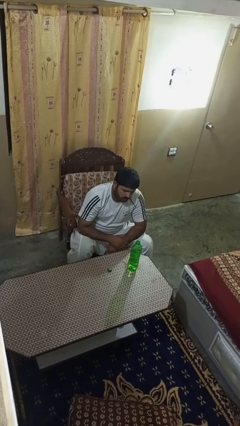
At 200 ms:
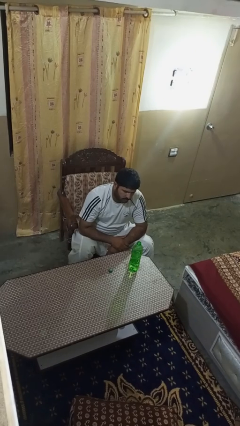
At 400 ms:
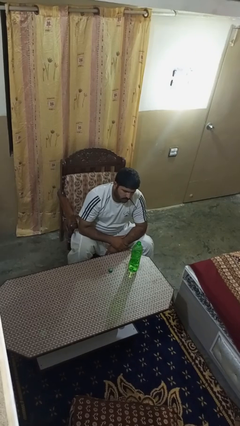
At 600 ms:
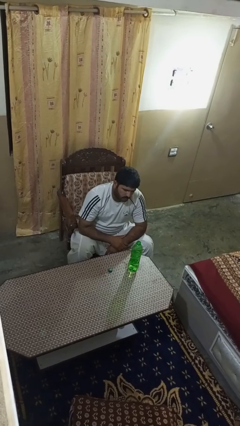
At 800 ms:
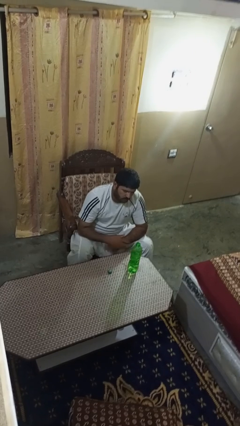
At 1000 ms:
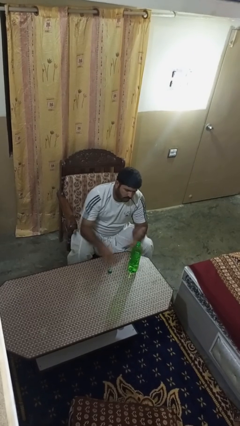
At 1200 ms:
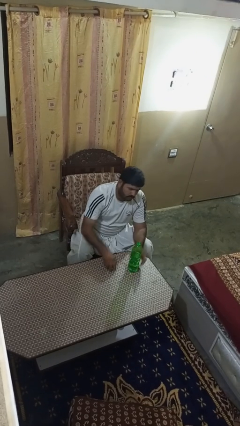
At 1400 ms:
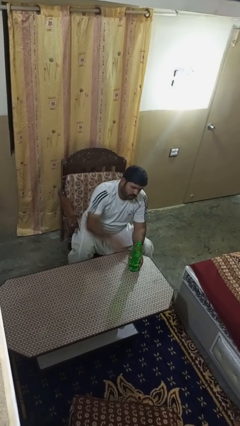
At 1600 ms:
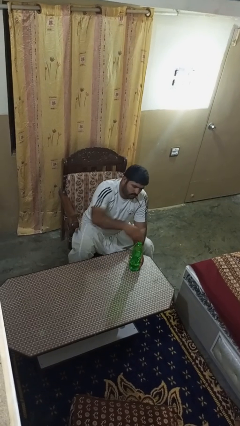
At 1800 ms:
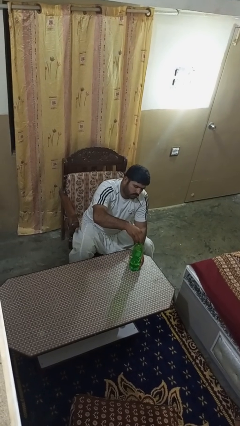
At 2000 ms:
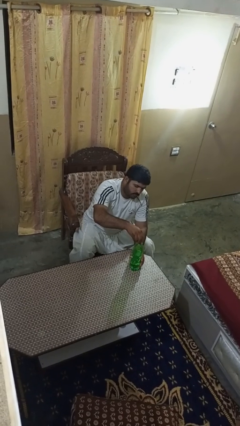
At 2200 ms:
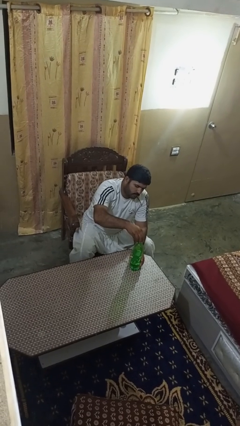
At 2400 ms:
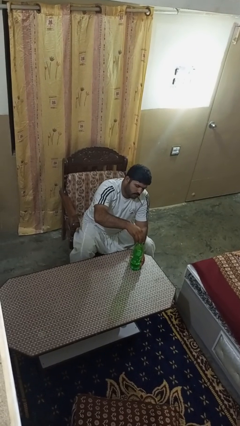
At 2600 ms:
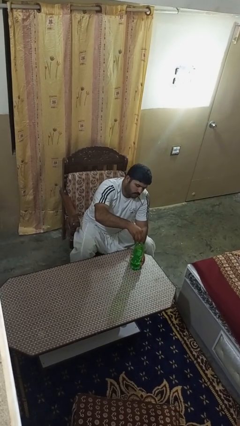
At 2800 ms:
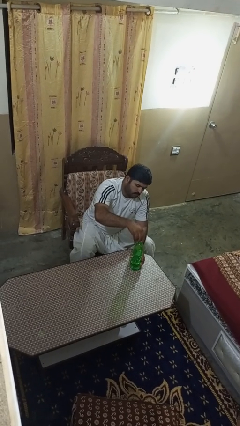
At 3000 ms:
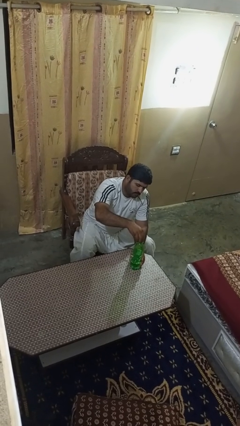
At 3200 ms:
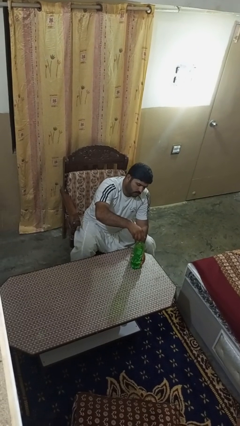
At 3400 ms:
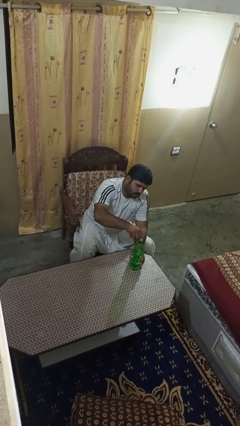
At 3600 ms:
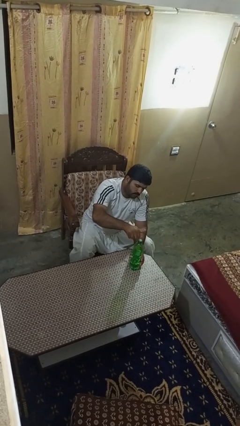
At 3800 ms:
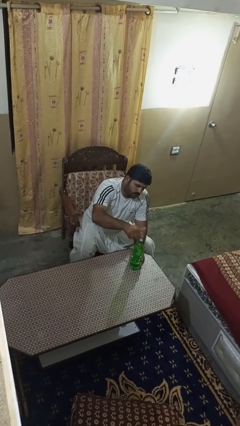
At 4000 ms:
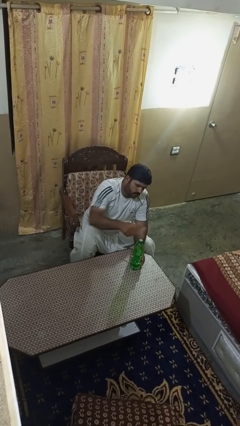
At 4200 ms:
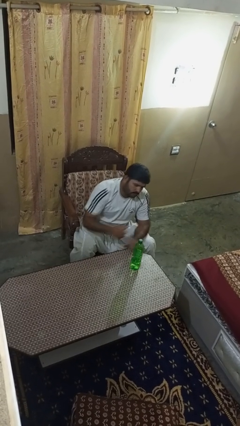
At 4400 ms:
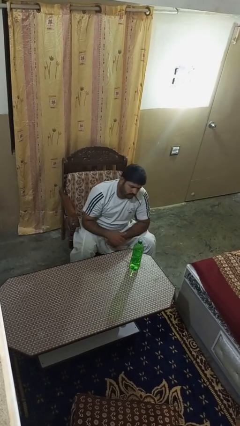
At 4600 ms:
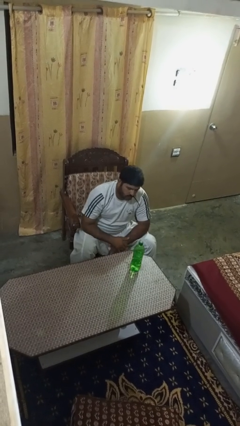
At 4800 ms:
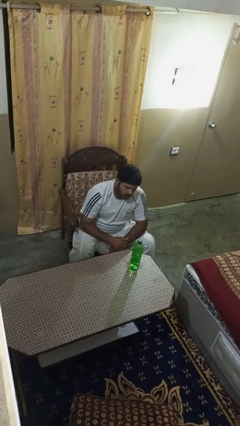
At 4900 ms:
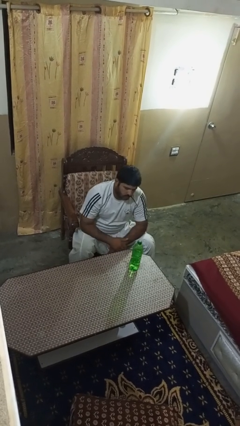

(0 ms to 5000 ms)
person screws lid to bottle

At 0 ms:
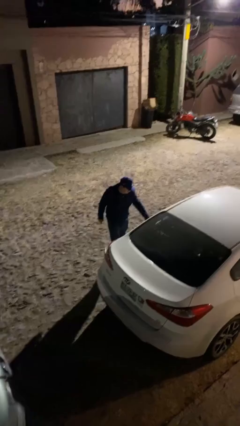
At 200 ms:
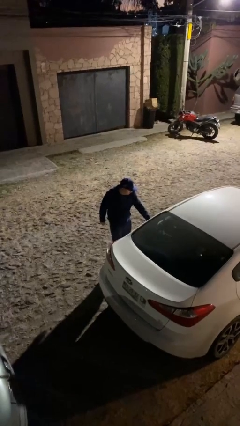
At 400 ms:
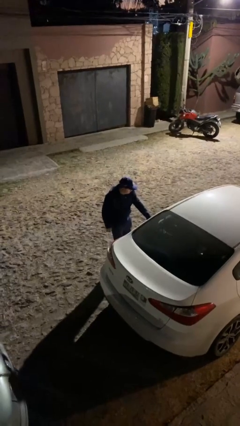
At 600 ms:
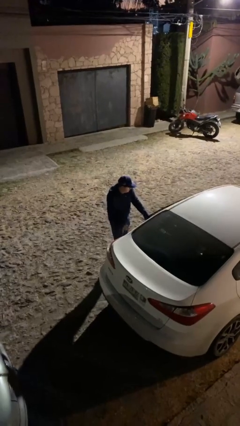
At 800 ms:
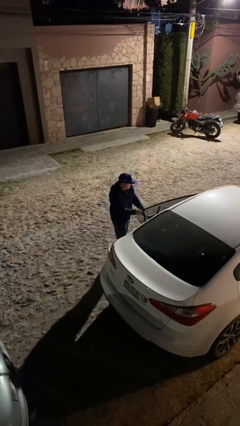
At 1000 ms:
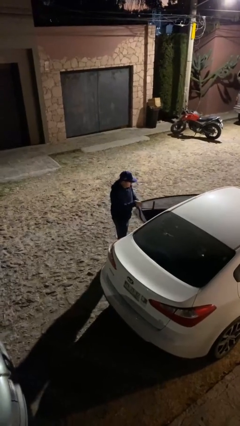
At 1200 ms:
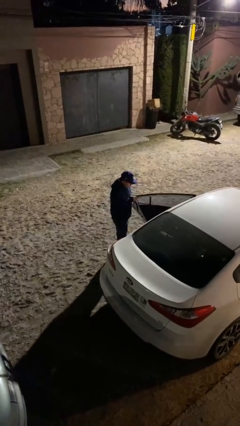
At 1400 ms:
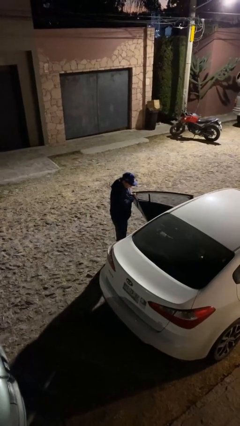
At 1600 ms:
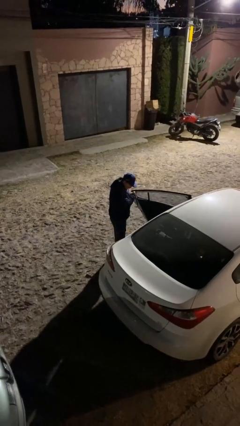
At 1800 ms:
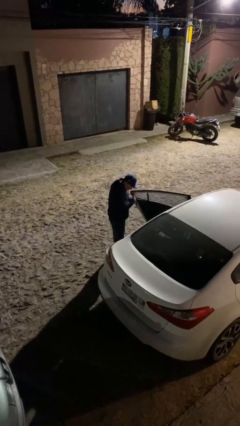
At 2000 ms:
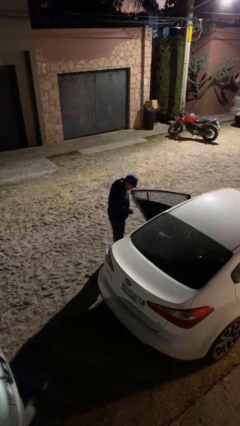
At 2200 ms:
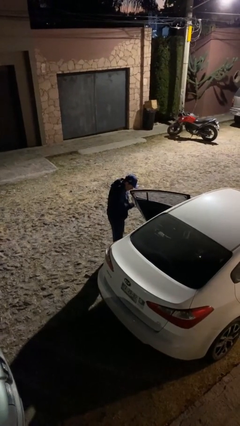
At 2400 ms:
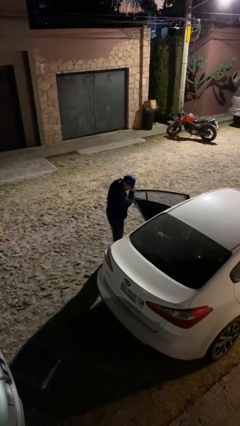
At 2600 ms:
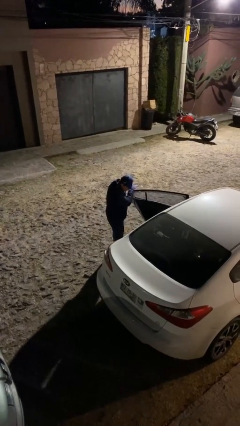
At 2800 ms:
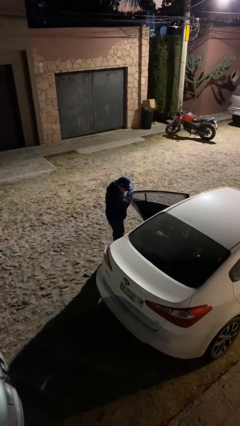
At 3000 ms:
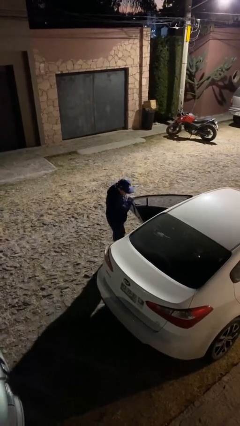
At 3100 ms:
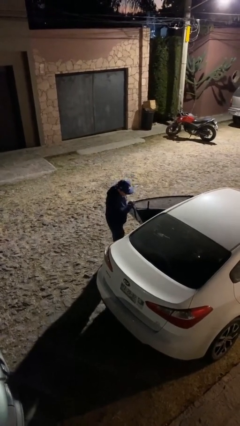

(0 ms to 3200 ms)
person opens car door

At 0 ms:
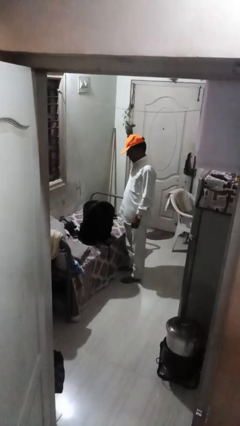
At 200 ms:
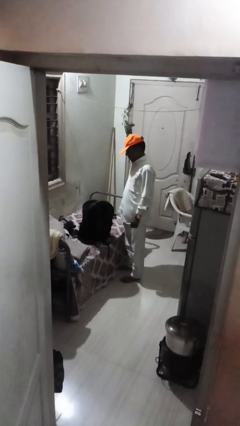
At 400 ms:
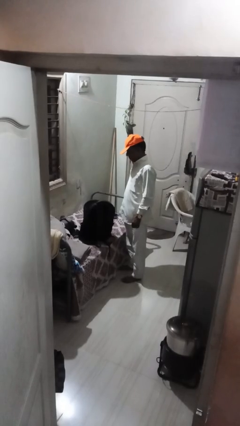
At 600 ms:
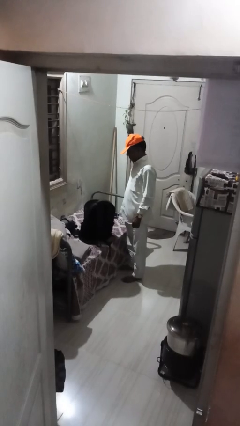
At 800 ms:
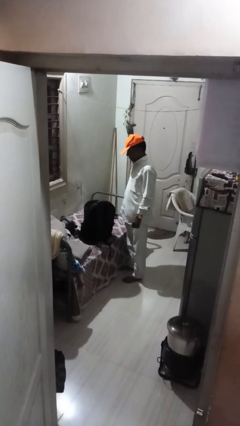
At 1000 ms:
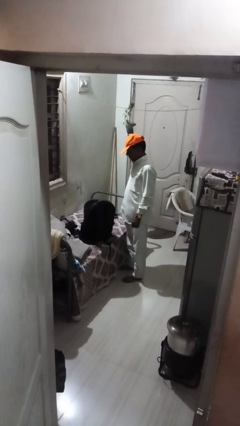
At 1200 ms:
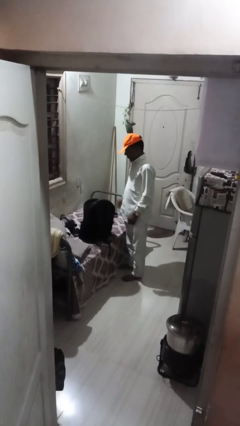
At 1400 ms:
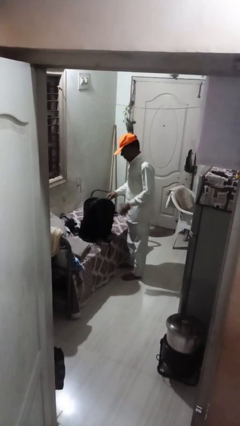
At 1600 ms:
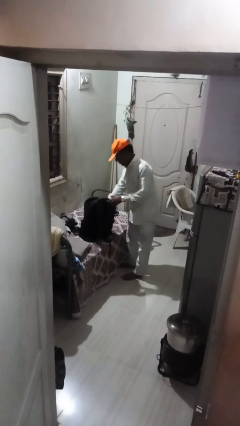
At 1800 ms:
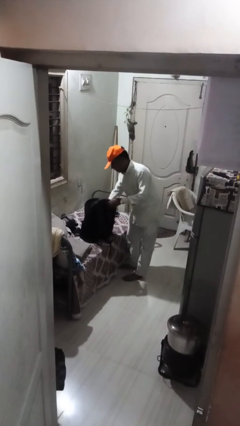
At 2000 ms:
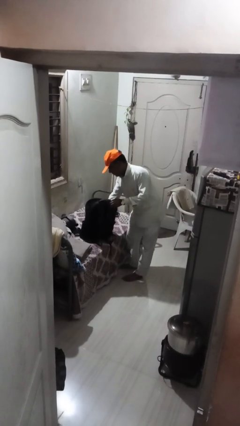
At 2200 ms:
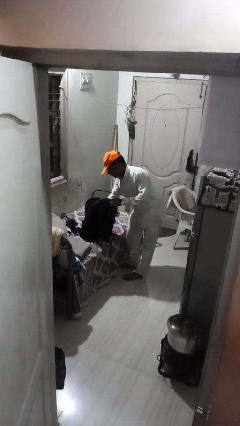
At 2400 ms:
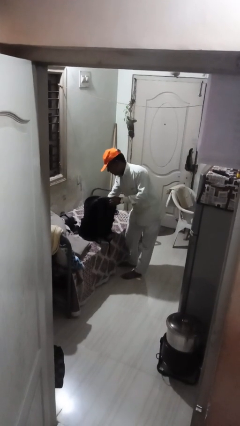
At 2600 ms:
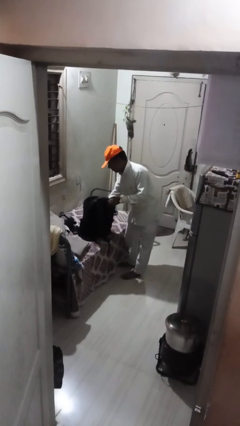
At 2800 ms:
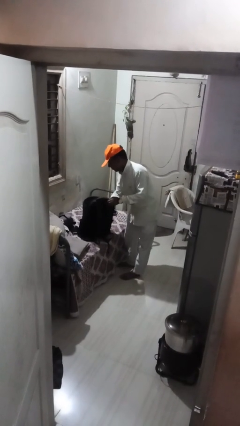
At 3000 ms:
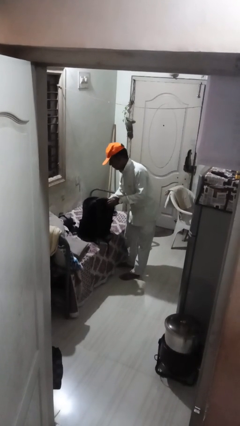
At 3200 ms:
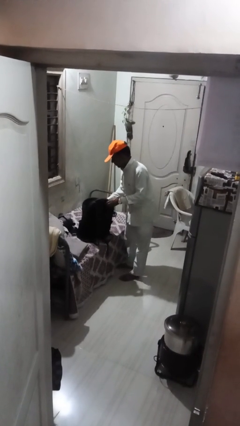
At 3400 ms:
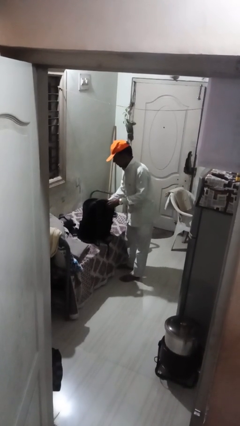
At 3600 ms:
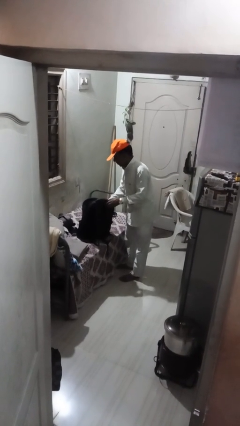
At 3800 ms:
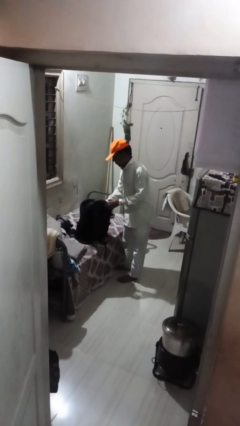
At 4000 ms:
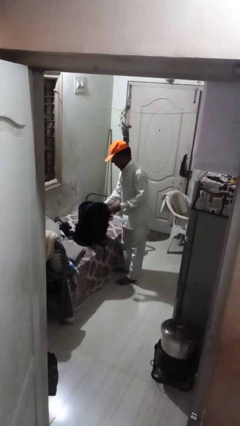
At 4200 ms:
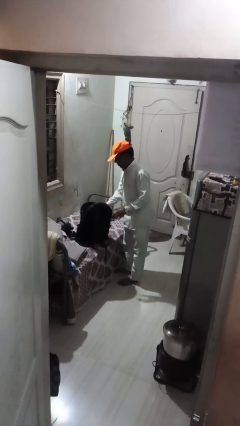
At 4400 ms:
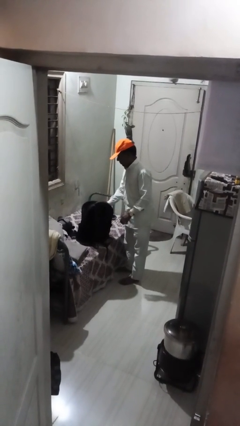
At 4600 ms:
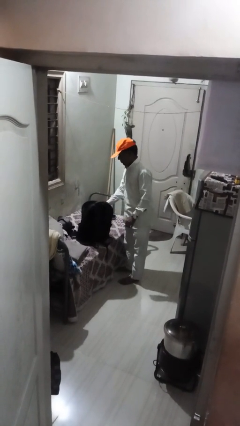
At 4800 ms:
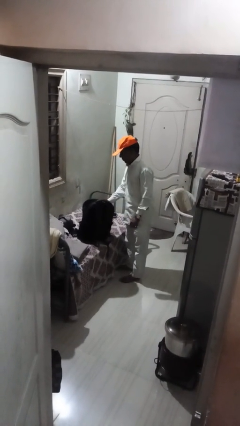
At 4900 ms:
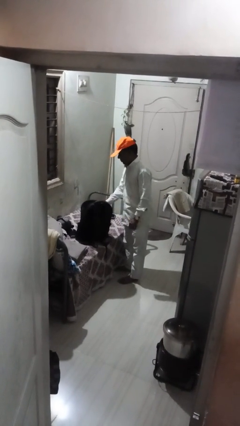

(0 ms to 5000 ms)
person searches in backpack

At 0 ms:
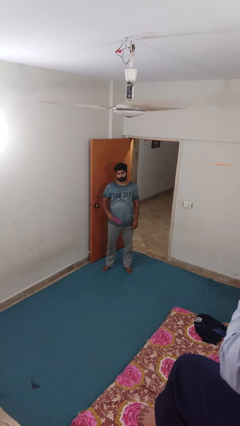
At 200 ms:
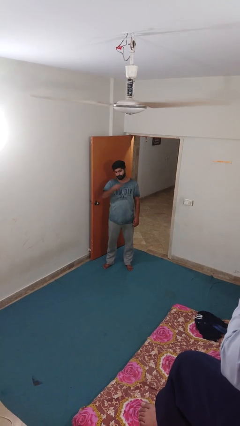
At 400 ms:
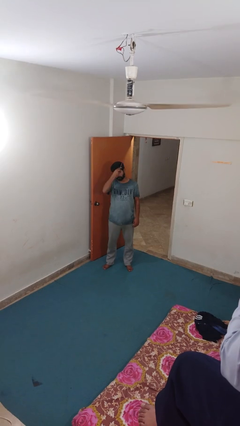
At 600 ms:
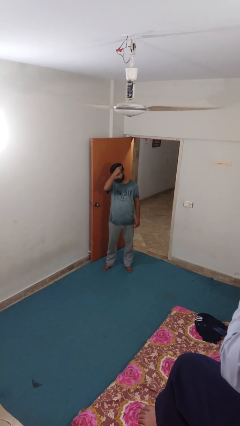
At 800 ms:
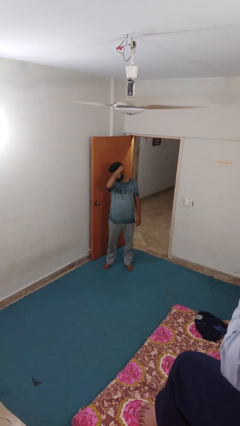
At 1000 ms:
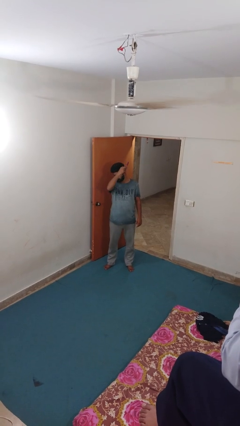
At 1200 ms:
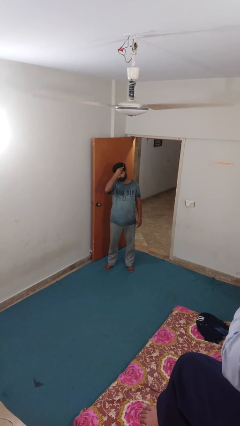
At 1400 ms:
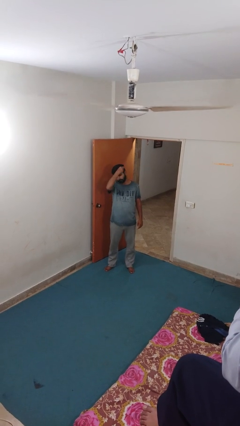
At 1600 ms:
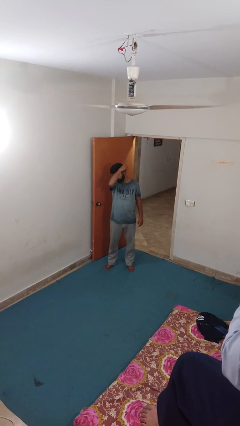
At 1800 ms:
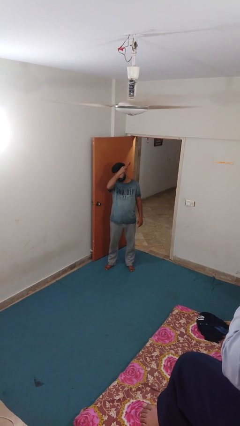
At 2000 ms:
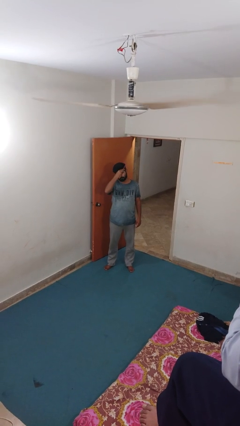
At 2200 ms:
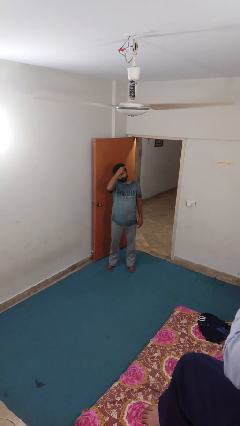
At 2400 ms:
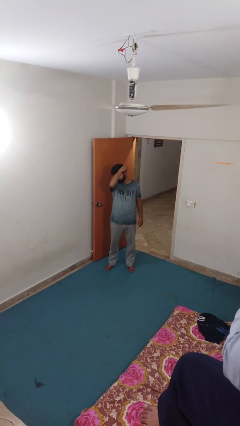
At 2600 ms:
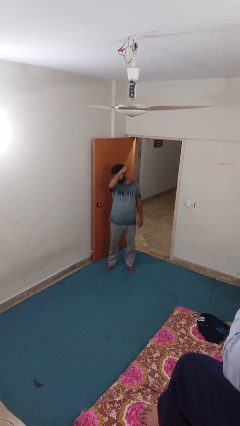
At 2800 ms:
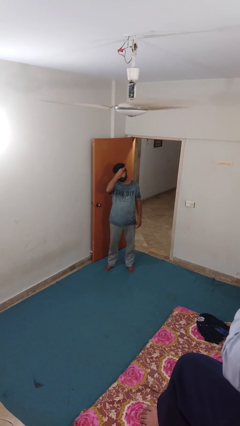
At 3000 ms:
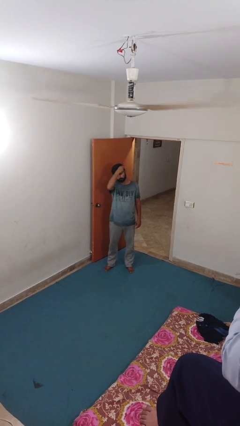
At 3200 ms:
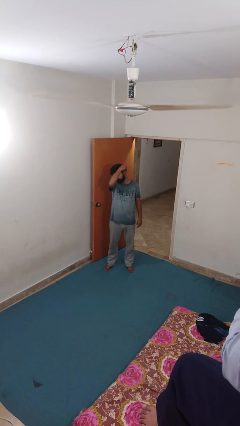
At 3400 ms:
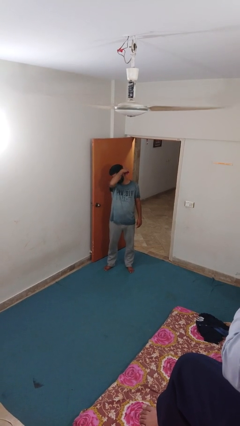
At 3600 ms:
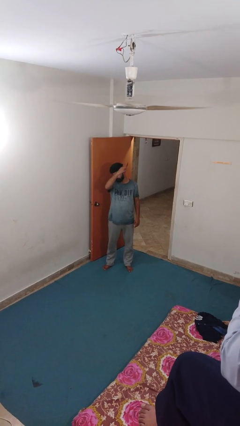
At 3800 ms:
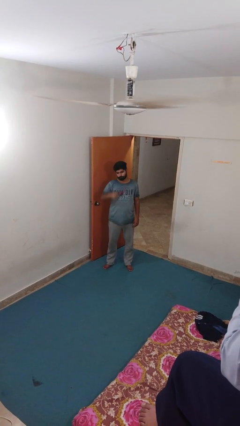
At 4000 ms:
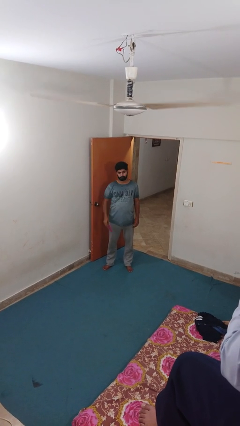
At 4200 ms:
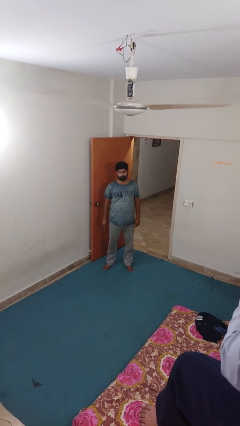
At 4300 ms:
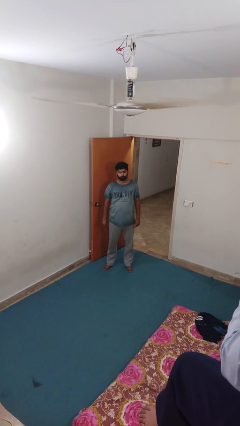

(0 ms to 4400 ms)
person brushes hair
